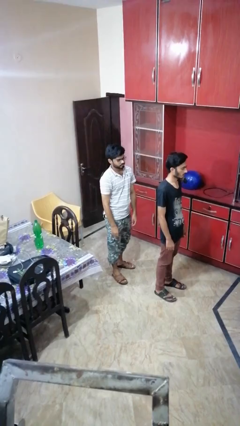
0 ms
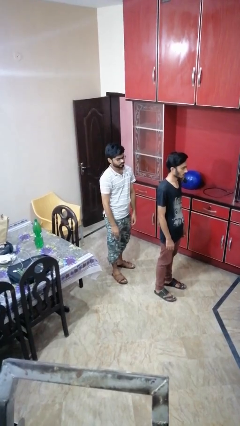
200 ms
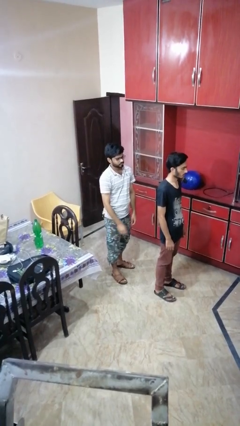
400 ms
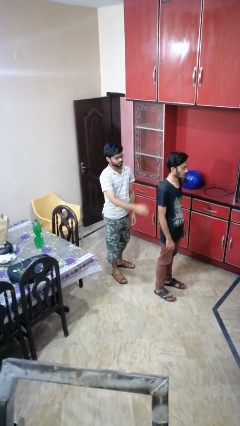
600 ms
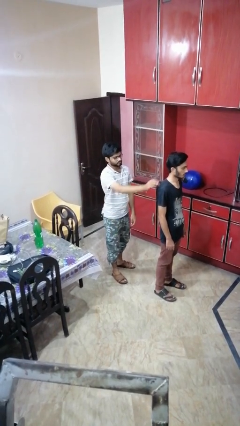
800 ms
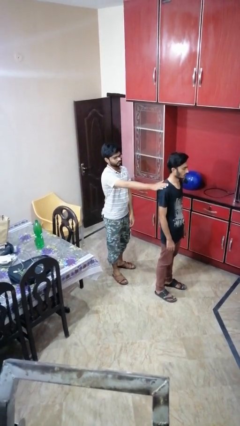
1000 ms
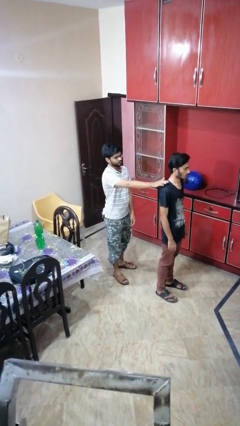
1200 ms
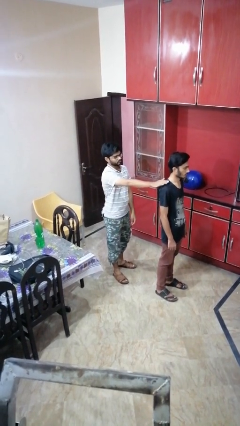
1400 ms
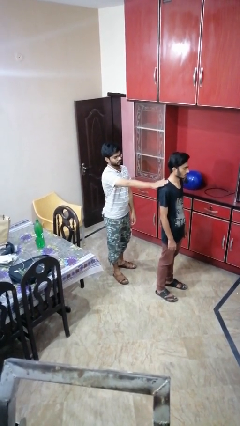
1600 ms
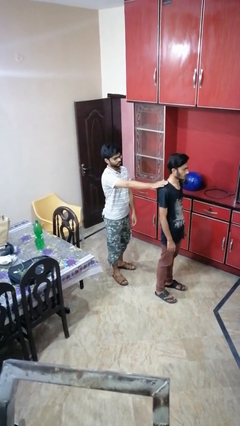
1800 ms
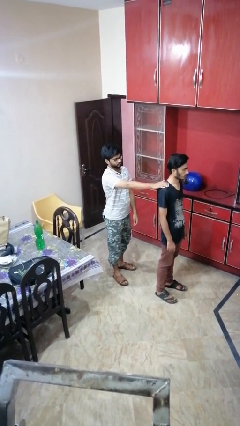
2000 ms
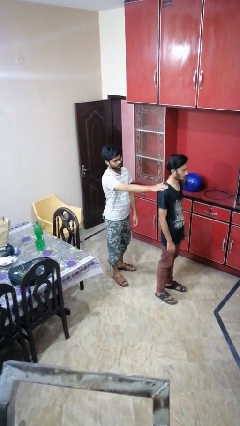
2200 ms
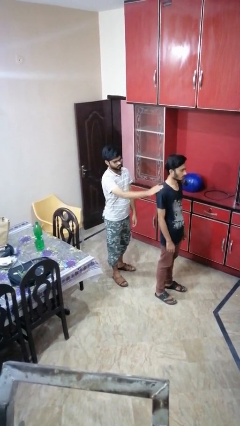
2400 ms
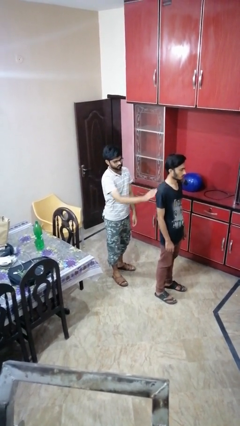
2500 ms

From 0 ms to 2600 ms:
person touches back of person

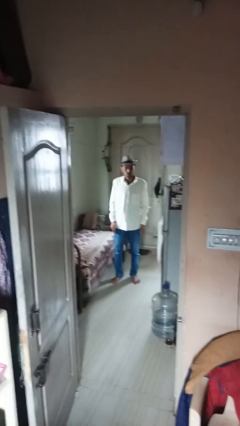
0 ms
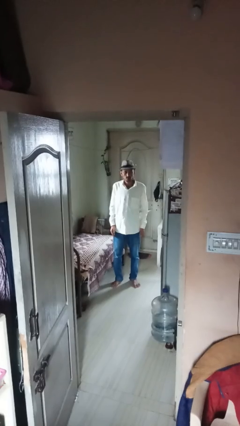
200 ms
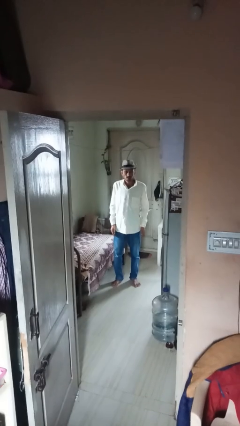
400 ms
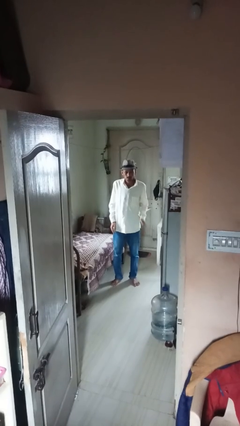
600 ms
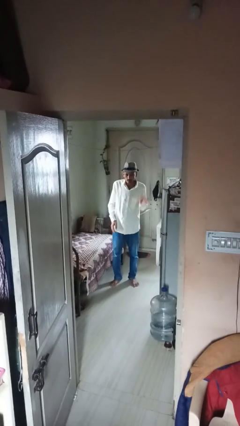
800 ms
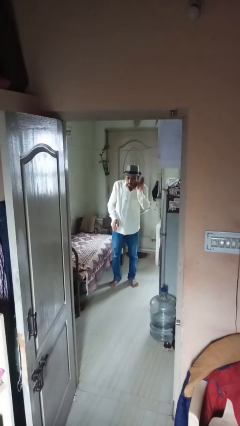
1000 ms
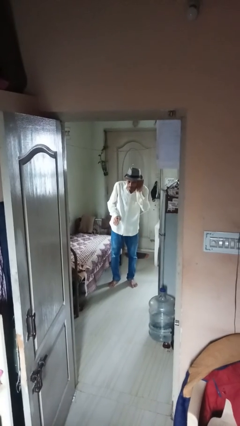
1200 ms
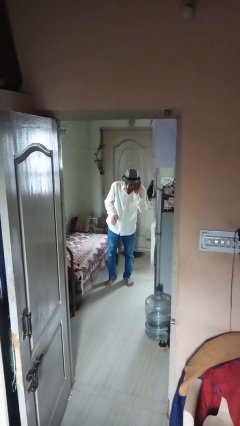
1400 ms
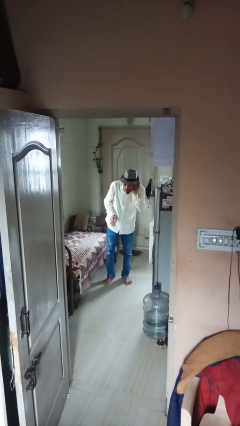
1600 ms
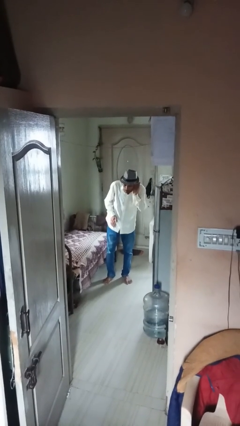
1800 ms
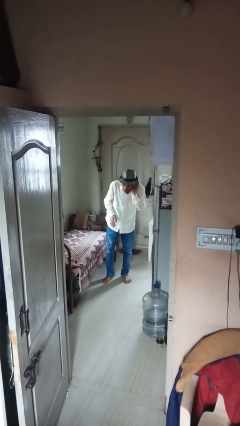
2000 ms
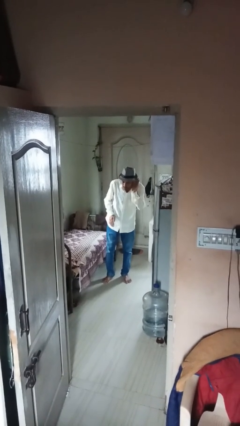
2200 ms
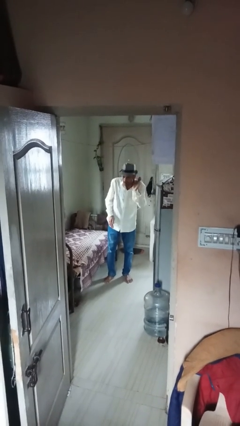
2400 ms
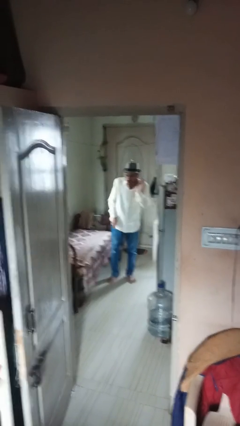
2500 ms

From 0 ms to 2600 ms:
person gestures listen closely

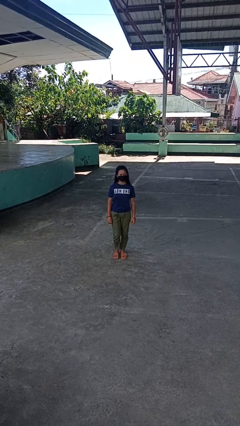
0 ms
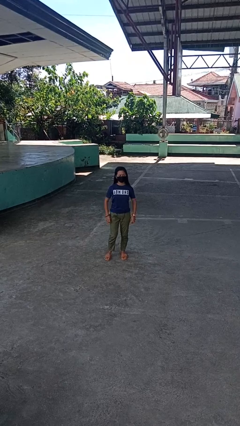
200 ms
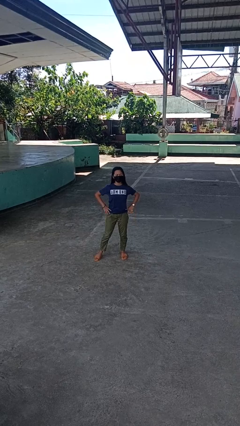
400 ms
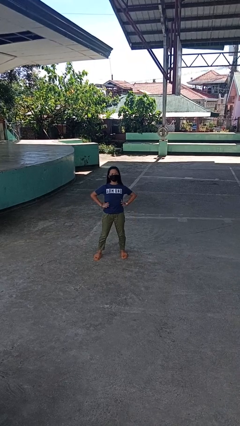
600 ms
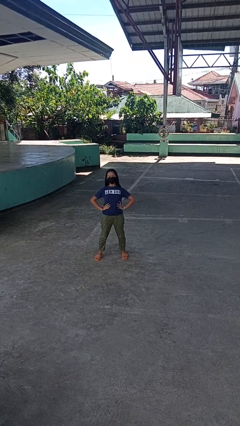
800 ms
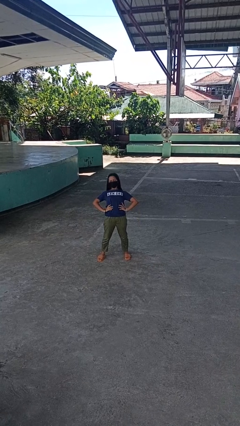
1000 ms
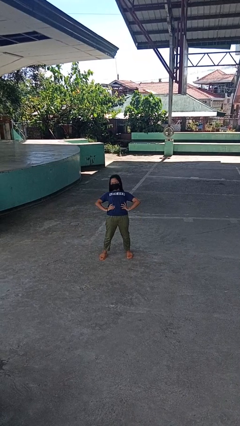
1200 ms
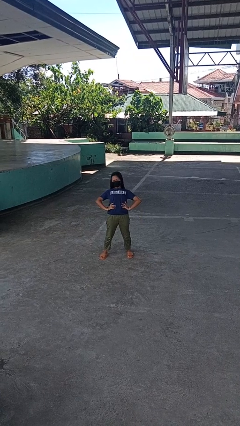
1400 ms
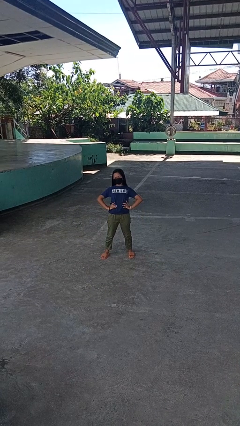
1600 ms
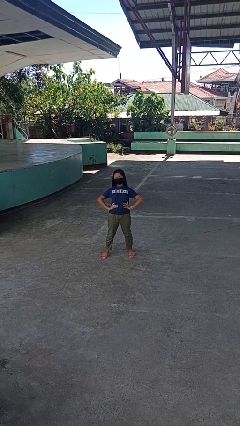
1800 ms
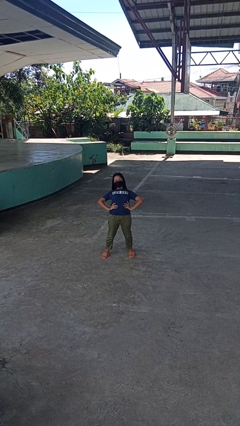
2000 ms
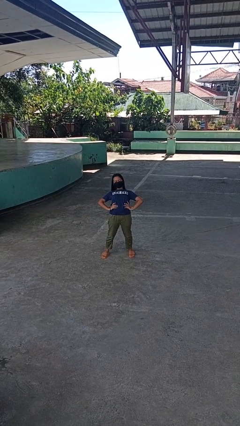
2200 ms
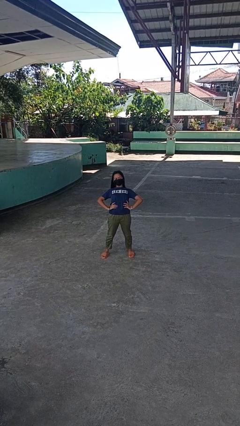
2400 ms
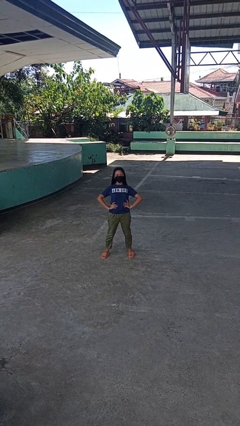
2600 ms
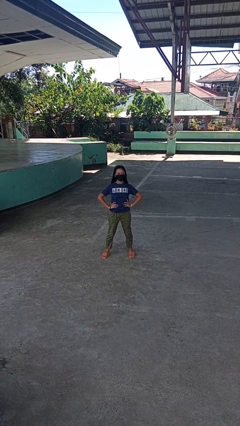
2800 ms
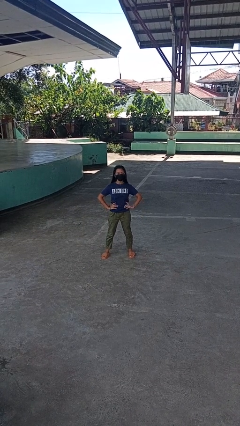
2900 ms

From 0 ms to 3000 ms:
person stretches back

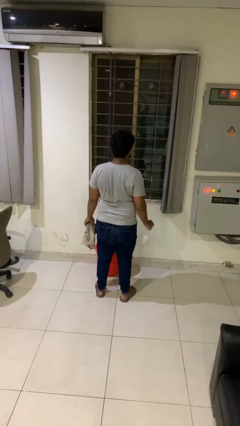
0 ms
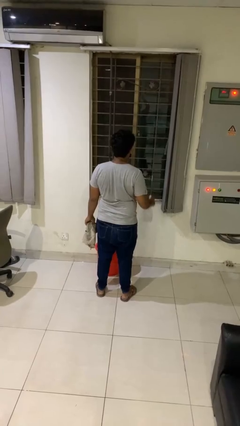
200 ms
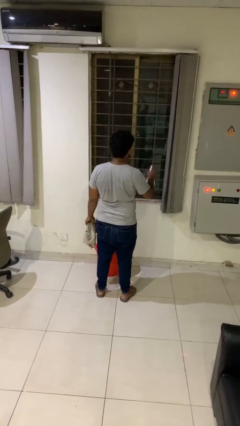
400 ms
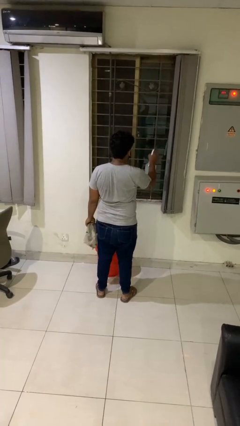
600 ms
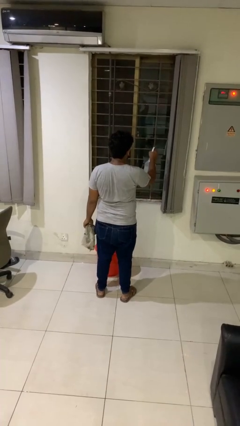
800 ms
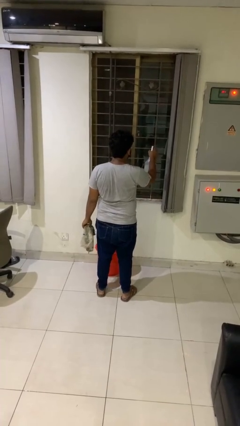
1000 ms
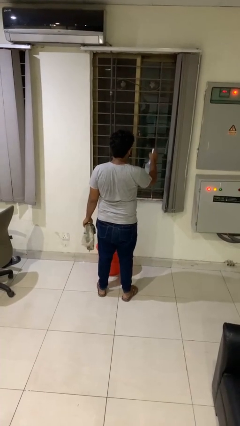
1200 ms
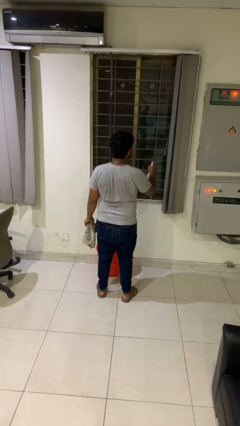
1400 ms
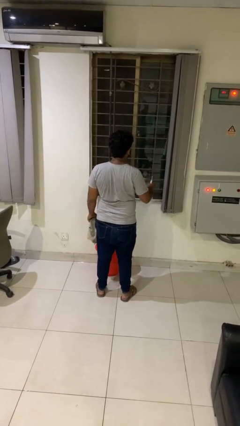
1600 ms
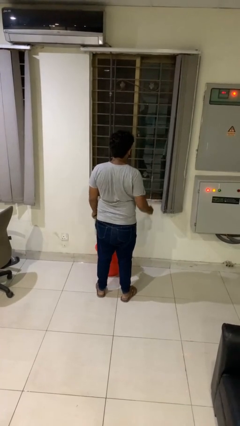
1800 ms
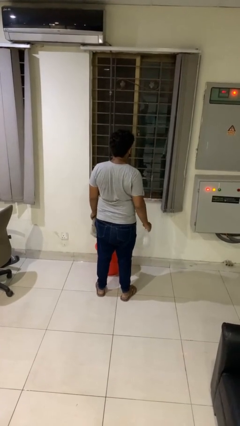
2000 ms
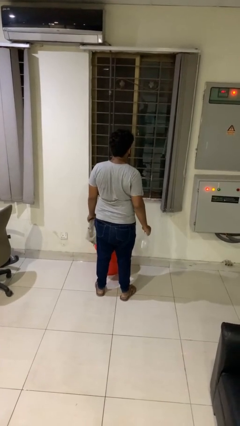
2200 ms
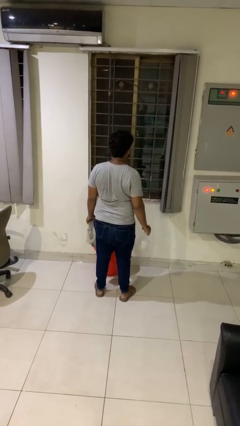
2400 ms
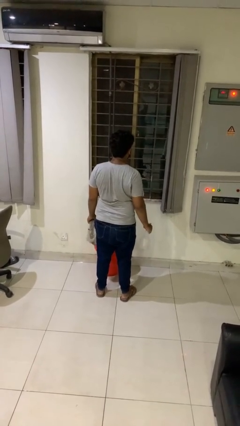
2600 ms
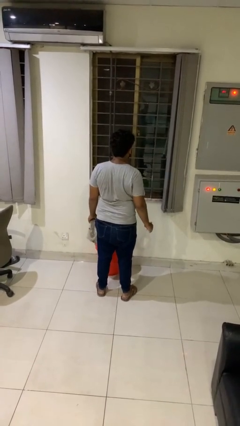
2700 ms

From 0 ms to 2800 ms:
person sprays from bottle

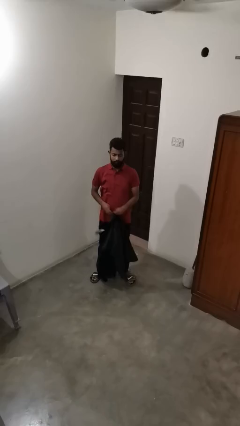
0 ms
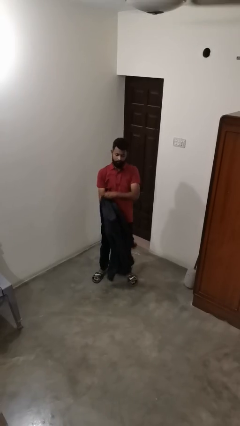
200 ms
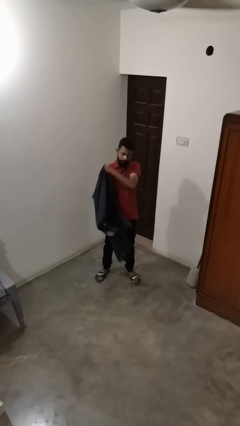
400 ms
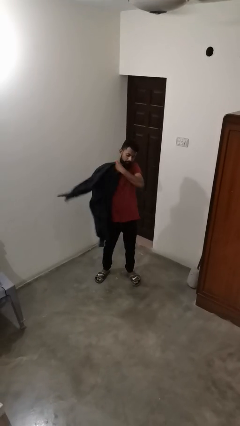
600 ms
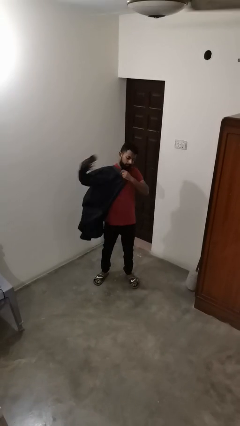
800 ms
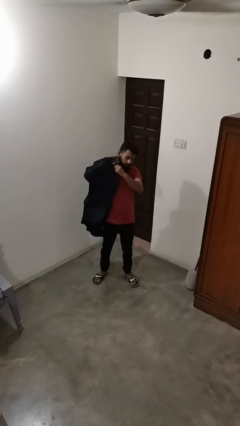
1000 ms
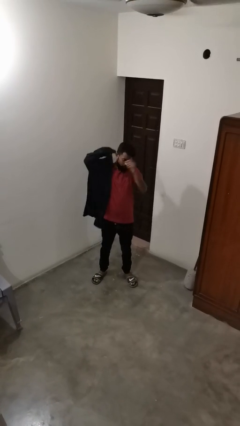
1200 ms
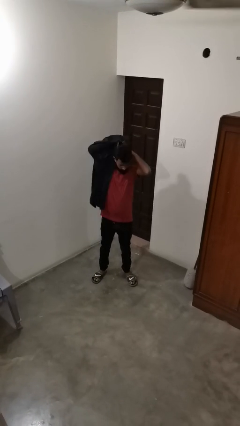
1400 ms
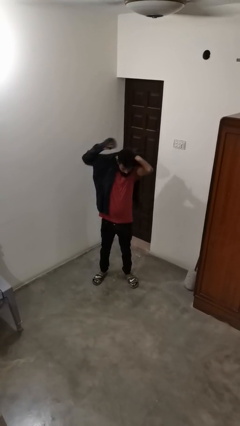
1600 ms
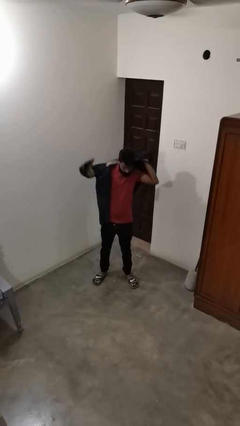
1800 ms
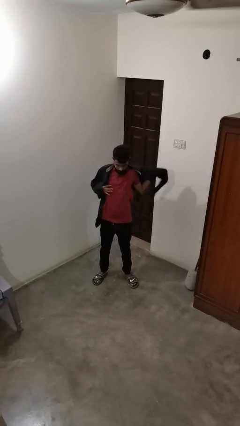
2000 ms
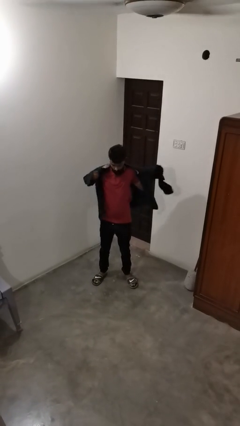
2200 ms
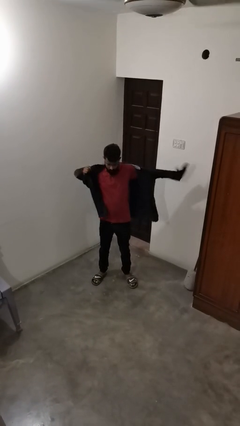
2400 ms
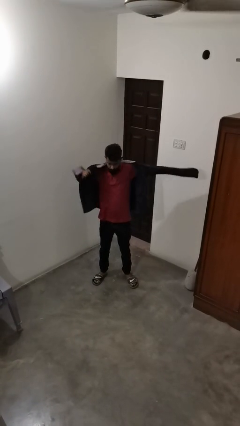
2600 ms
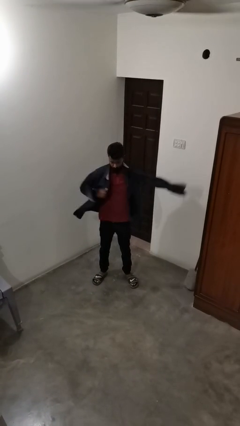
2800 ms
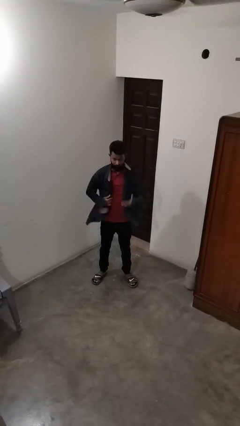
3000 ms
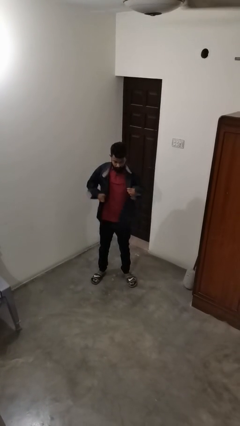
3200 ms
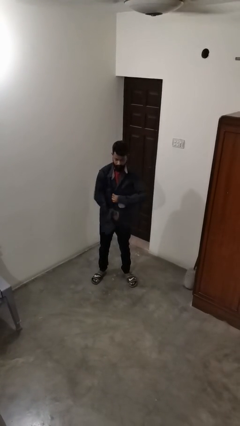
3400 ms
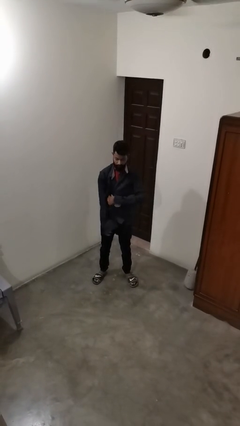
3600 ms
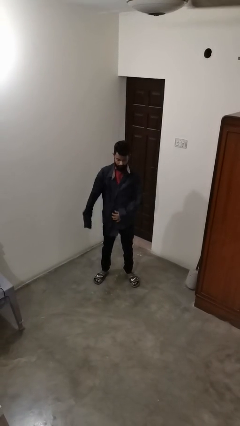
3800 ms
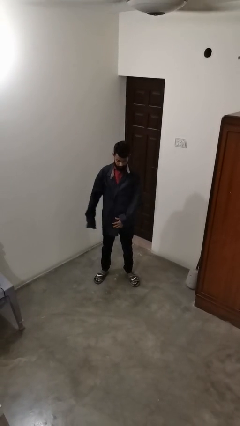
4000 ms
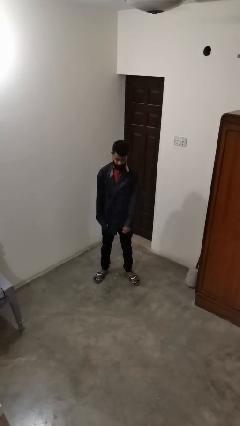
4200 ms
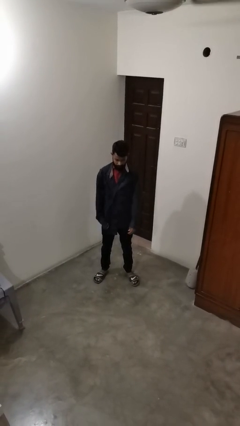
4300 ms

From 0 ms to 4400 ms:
person puts on shirt

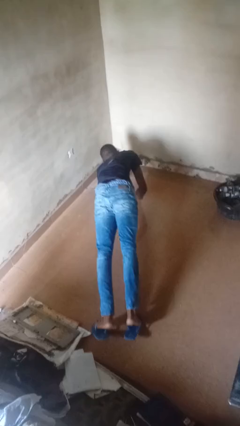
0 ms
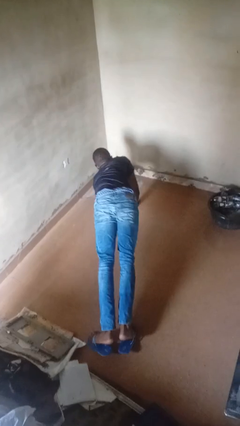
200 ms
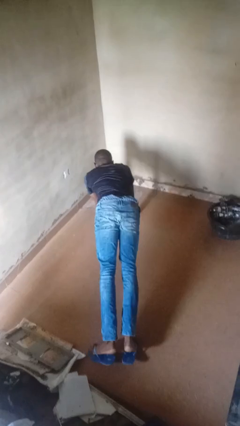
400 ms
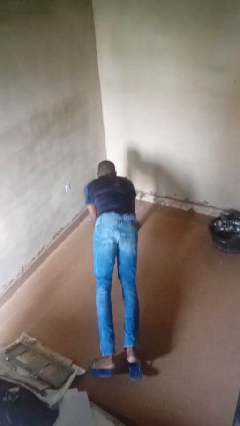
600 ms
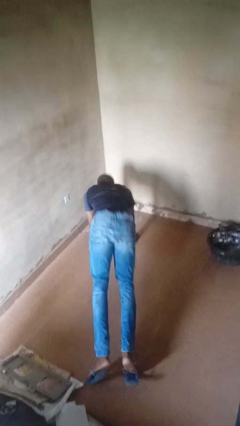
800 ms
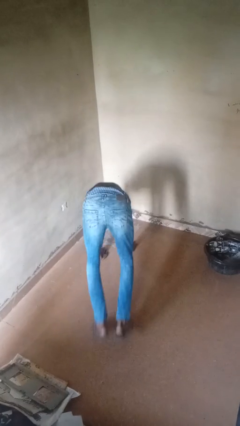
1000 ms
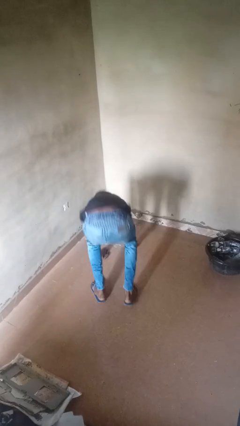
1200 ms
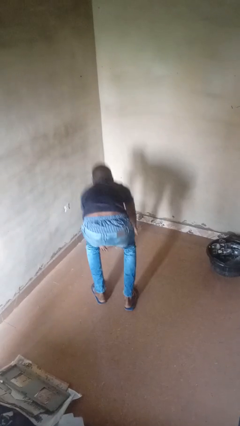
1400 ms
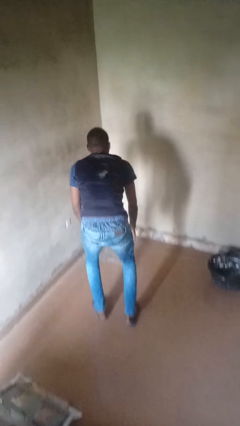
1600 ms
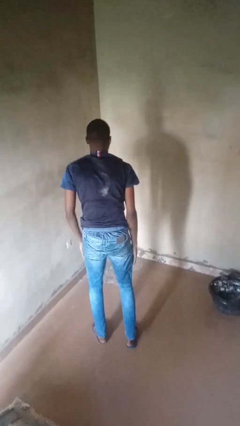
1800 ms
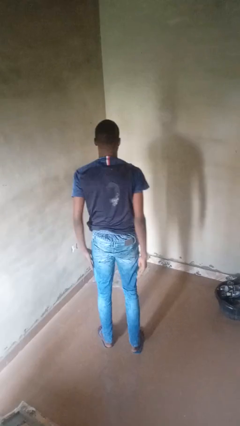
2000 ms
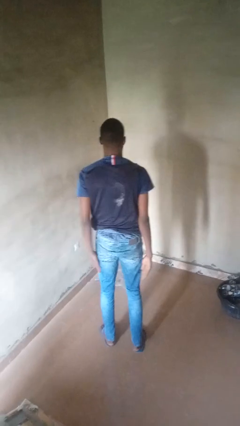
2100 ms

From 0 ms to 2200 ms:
person stands up from floor
